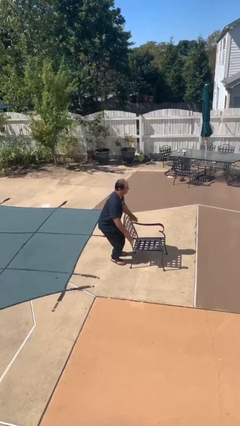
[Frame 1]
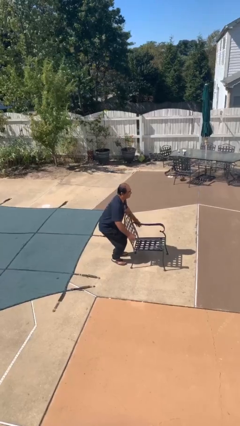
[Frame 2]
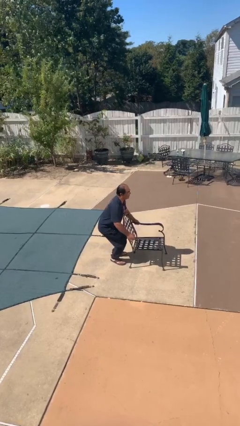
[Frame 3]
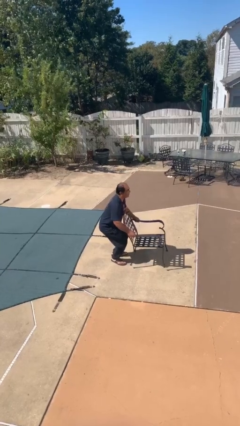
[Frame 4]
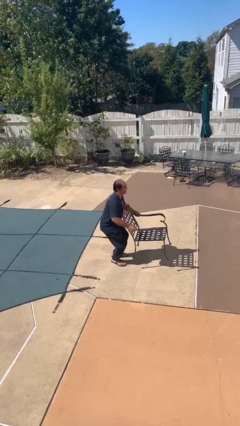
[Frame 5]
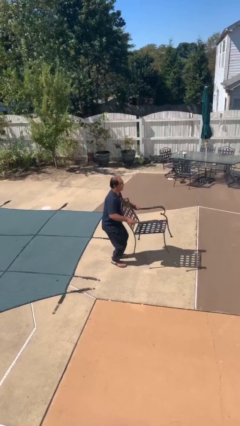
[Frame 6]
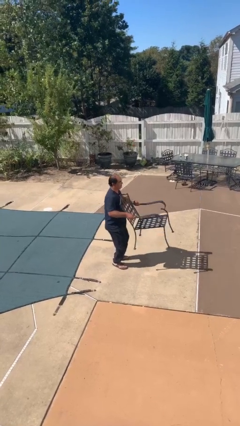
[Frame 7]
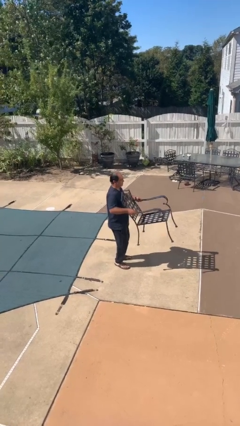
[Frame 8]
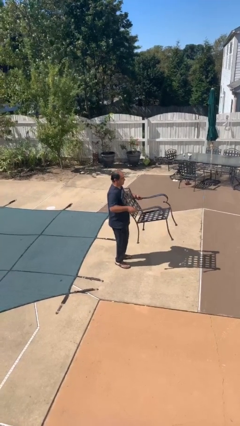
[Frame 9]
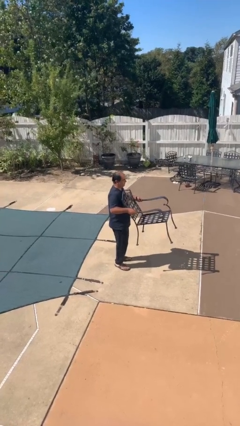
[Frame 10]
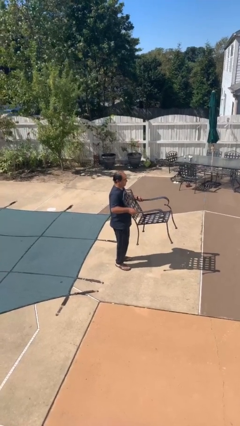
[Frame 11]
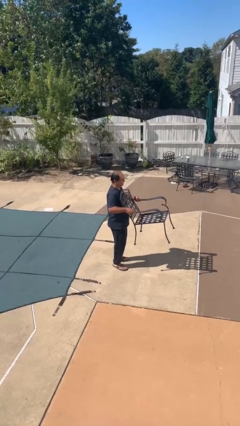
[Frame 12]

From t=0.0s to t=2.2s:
person picks up object from floor

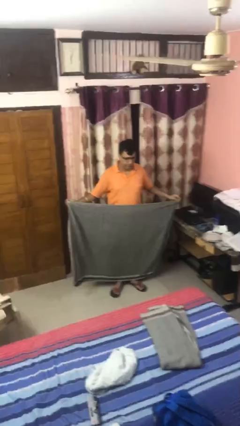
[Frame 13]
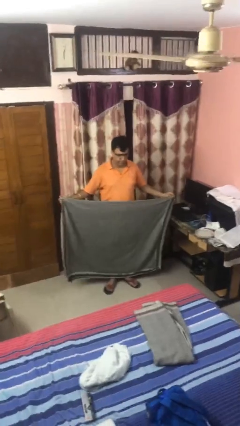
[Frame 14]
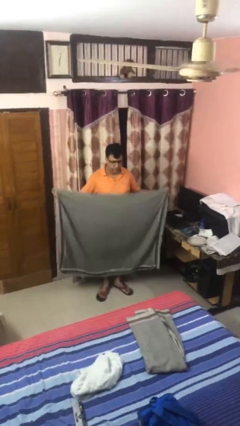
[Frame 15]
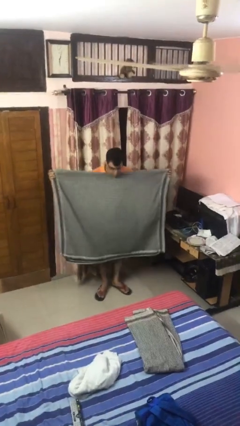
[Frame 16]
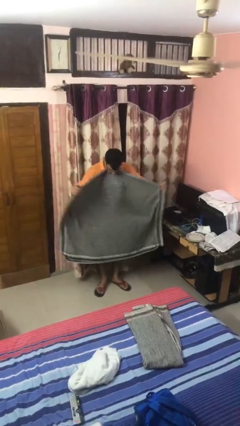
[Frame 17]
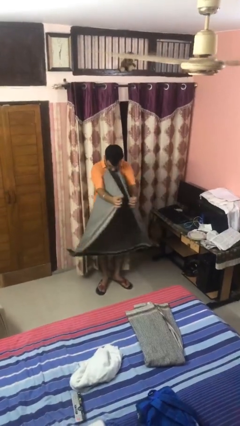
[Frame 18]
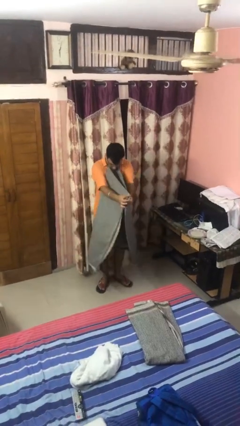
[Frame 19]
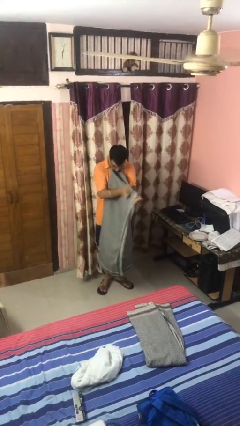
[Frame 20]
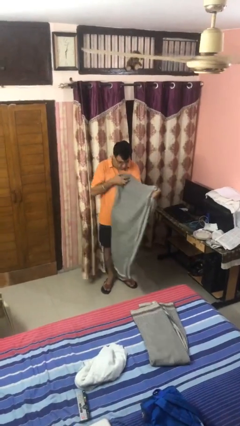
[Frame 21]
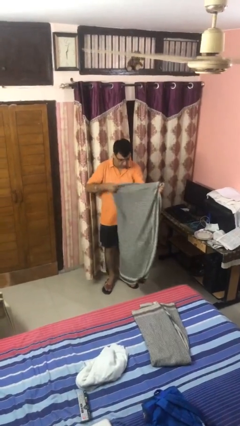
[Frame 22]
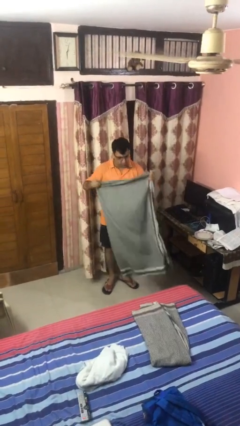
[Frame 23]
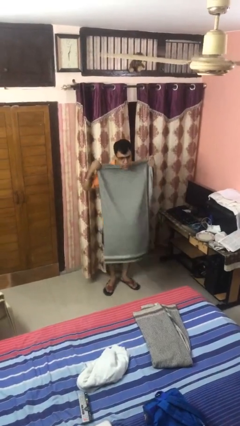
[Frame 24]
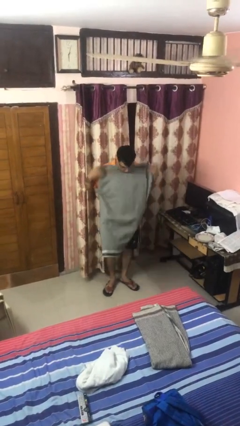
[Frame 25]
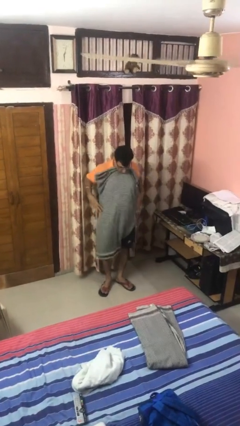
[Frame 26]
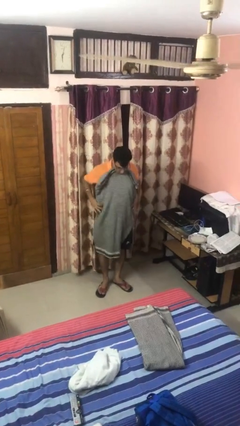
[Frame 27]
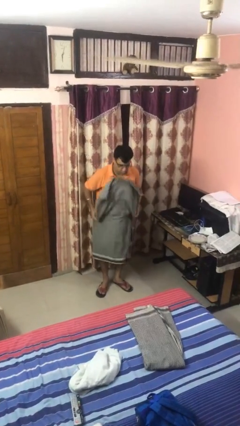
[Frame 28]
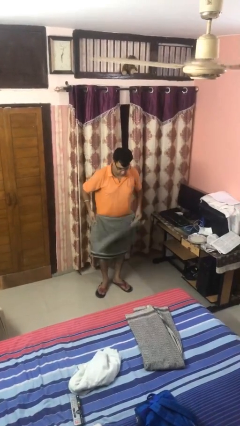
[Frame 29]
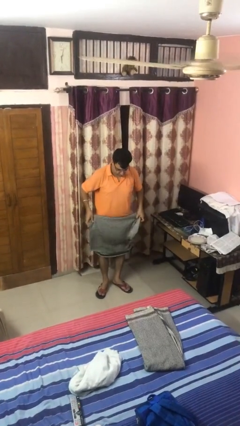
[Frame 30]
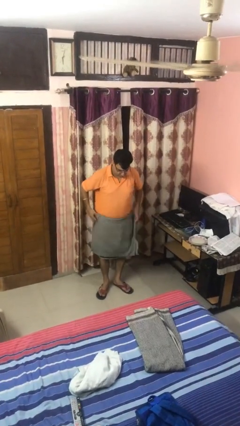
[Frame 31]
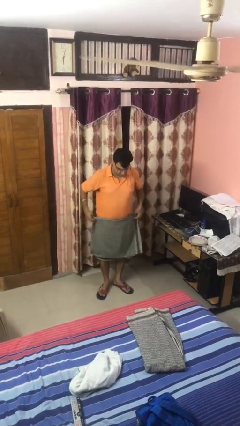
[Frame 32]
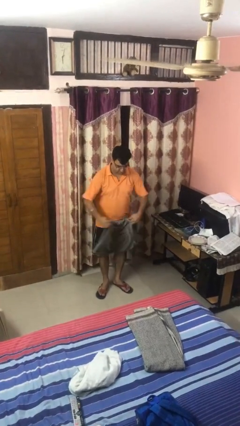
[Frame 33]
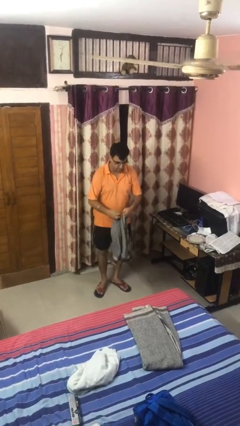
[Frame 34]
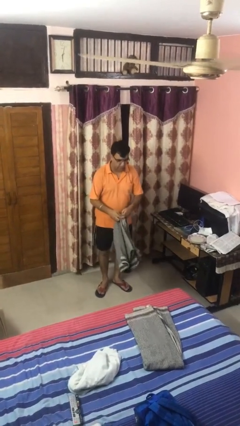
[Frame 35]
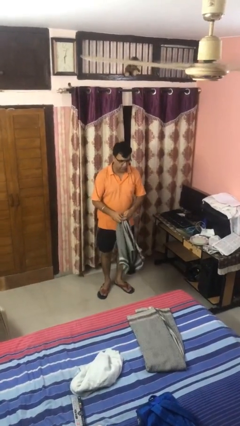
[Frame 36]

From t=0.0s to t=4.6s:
person folds blanket

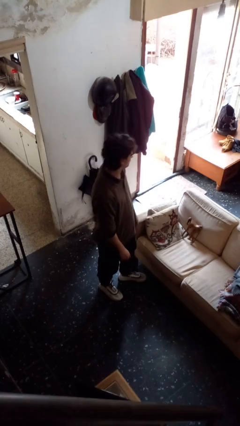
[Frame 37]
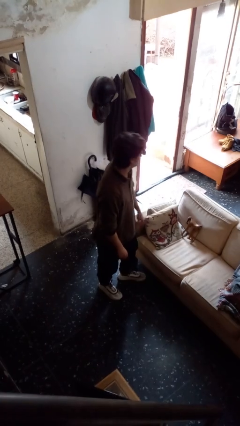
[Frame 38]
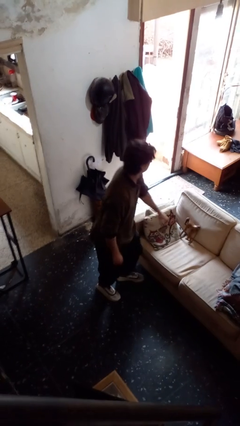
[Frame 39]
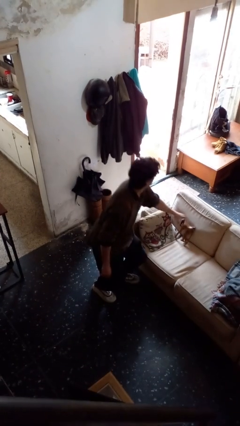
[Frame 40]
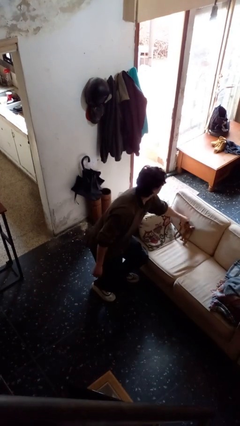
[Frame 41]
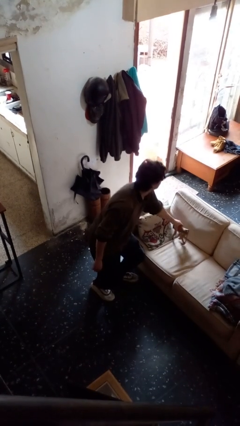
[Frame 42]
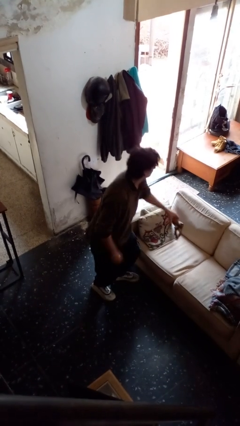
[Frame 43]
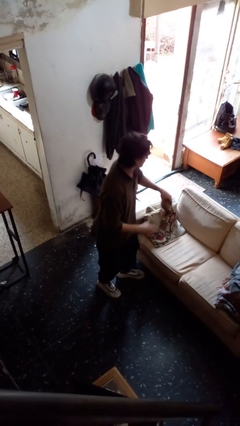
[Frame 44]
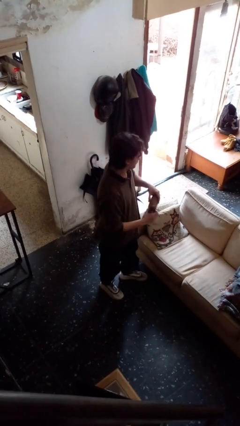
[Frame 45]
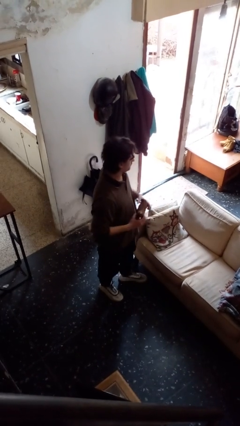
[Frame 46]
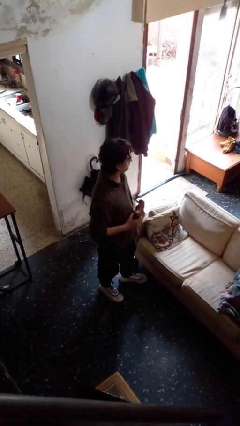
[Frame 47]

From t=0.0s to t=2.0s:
person picks up object from couch

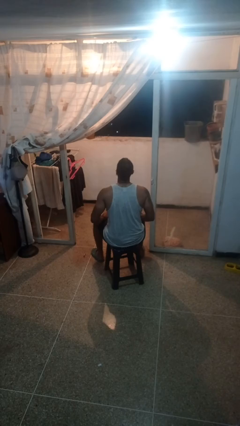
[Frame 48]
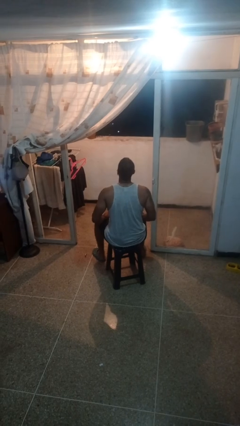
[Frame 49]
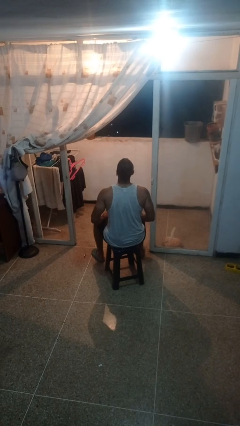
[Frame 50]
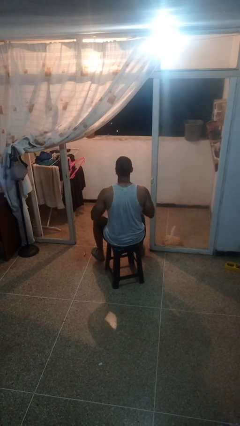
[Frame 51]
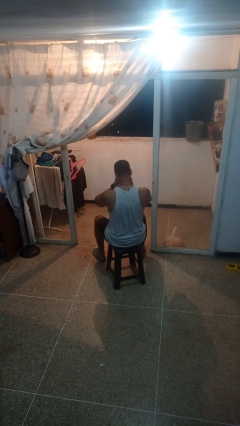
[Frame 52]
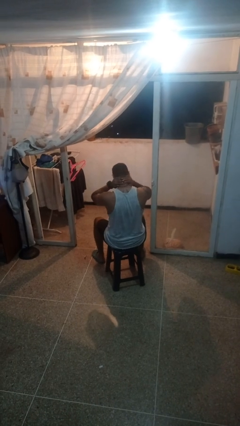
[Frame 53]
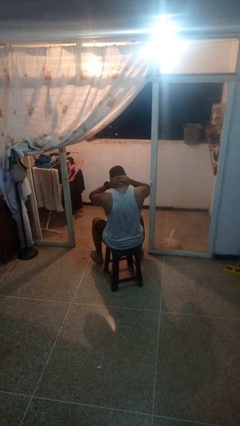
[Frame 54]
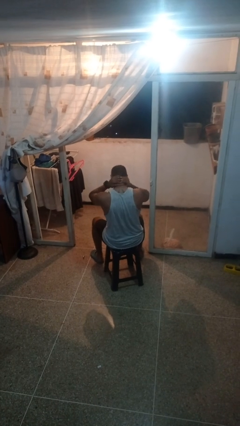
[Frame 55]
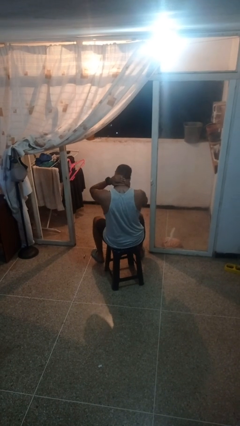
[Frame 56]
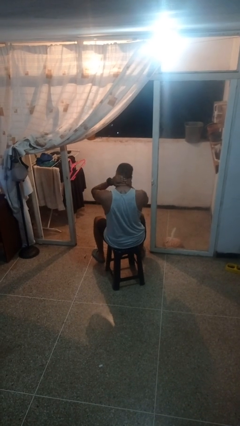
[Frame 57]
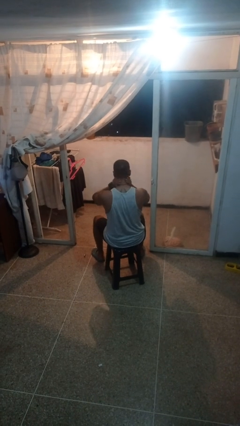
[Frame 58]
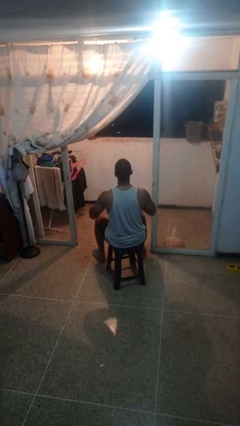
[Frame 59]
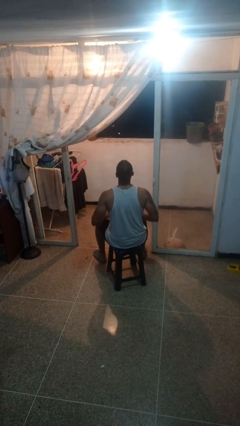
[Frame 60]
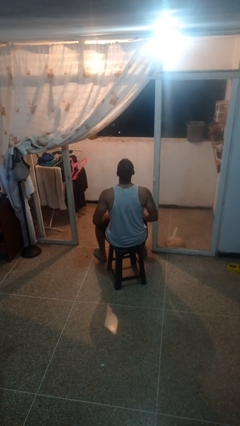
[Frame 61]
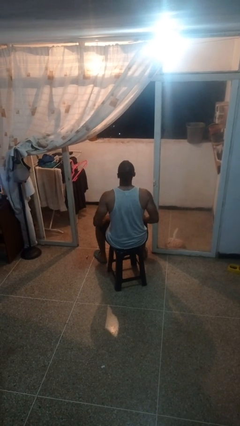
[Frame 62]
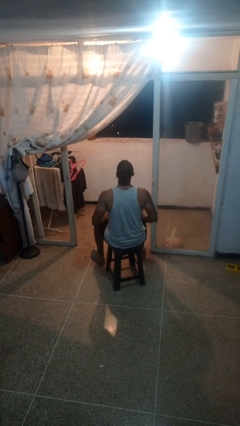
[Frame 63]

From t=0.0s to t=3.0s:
person rubs neck

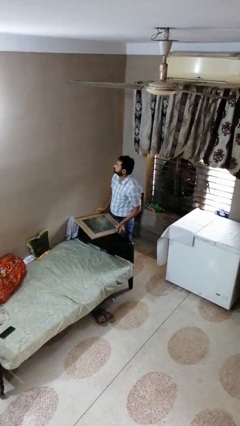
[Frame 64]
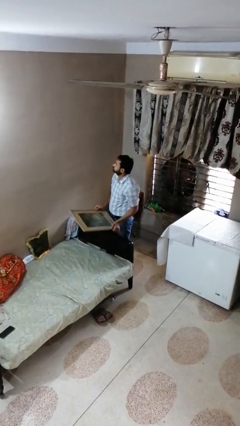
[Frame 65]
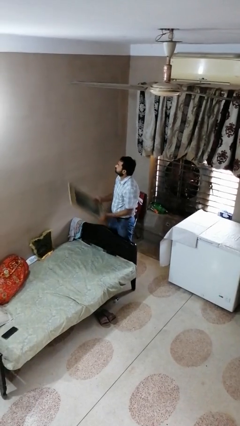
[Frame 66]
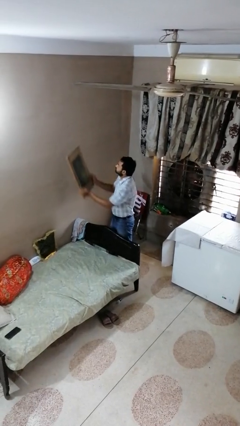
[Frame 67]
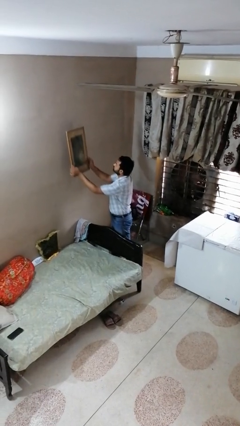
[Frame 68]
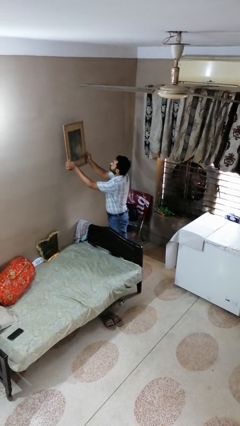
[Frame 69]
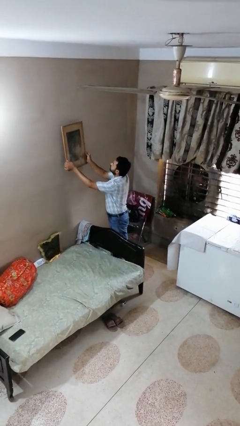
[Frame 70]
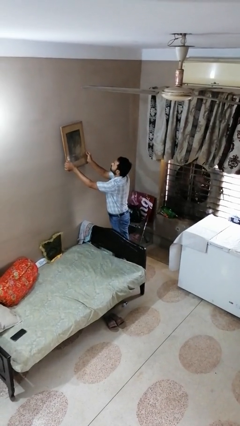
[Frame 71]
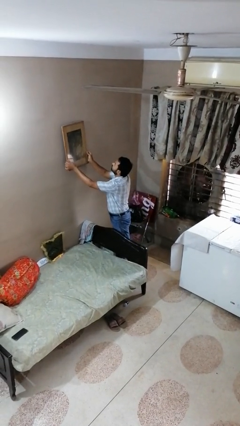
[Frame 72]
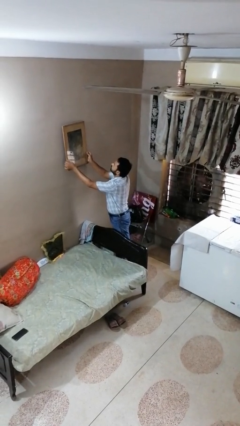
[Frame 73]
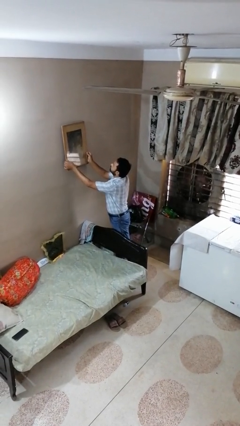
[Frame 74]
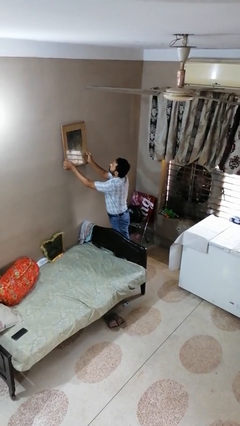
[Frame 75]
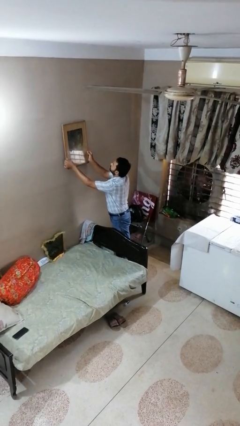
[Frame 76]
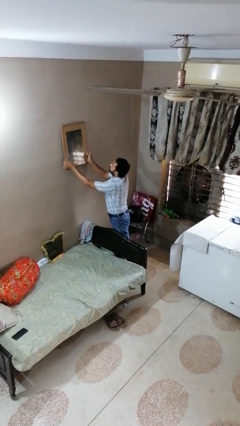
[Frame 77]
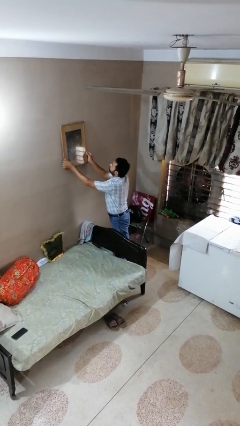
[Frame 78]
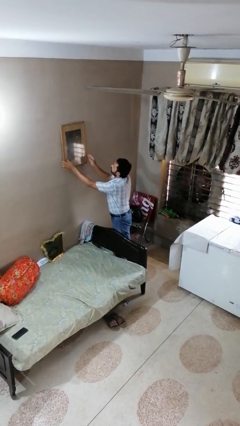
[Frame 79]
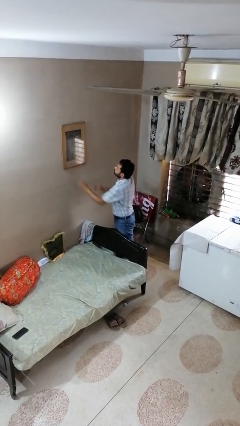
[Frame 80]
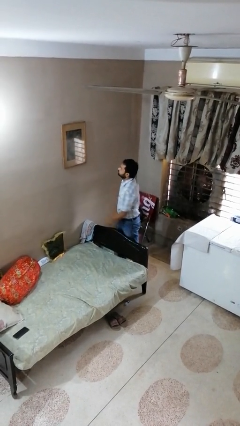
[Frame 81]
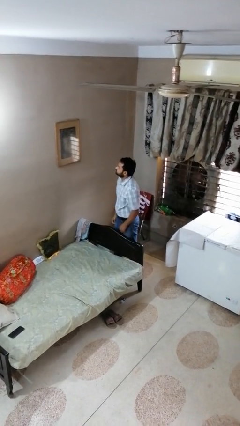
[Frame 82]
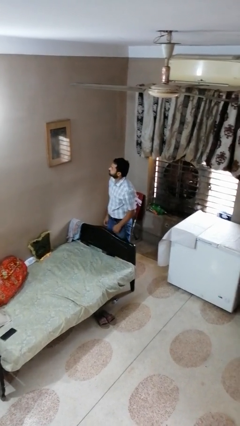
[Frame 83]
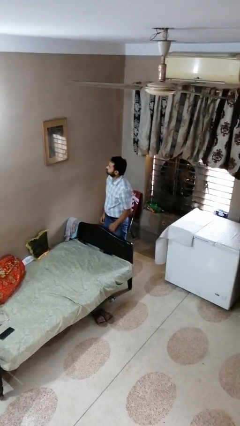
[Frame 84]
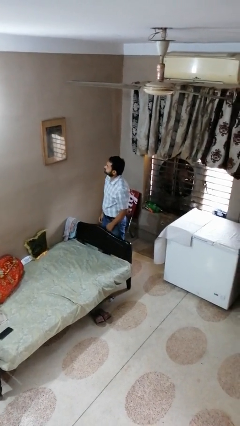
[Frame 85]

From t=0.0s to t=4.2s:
person puts up picture frame

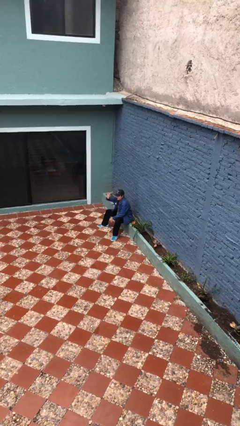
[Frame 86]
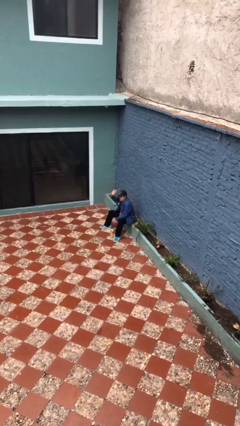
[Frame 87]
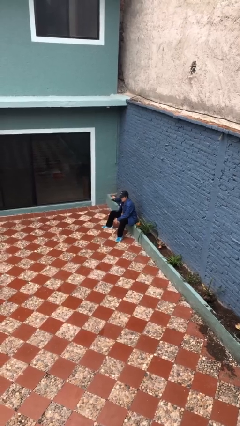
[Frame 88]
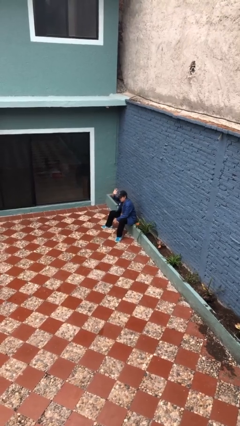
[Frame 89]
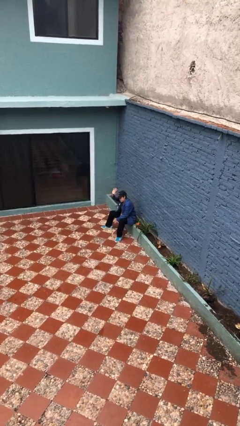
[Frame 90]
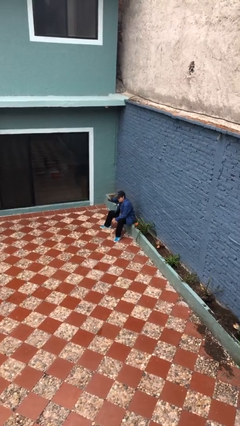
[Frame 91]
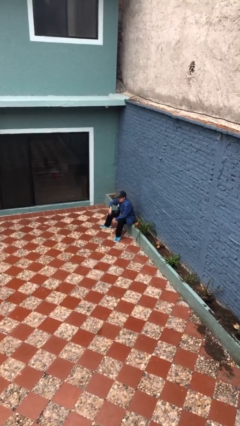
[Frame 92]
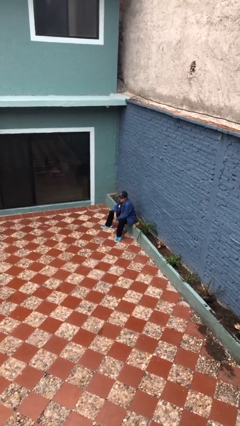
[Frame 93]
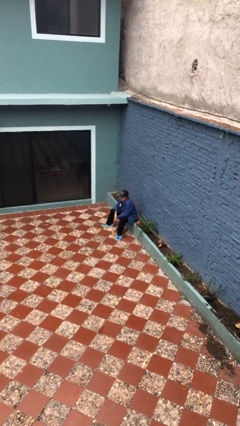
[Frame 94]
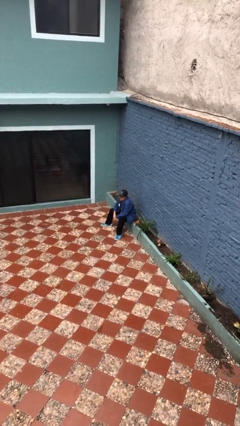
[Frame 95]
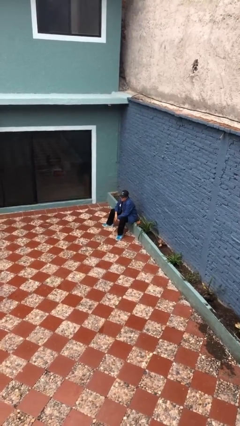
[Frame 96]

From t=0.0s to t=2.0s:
person waves at person
